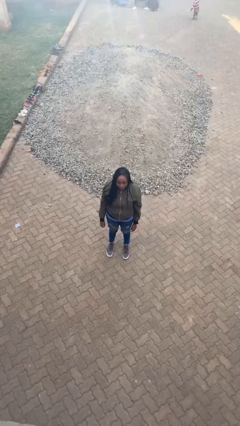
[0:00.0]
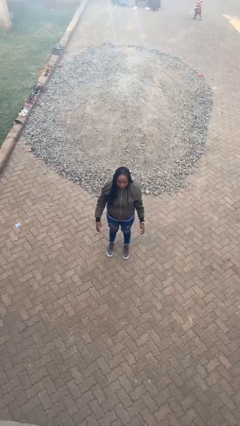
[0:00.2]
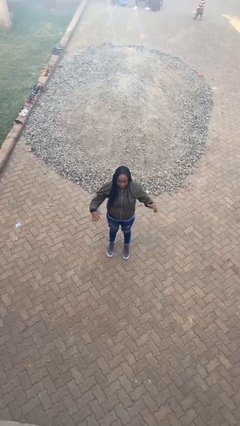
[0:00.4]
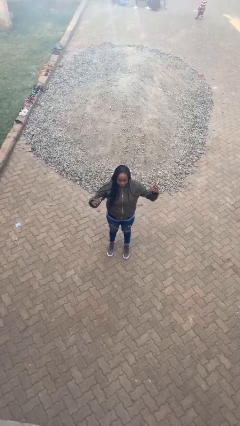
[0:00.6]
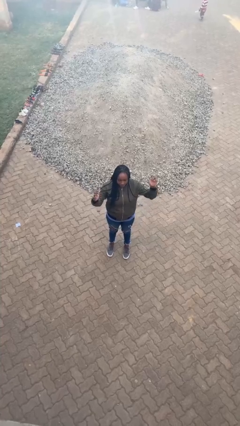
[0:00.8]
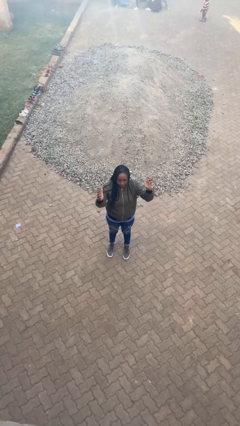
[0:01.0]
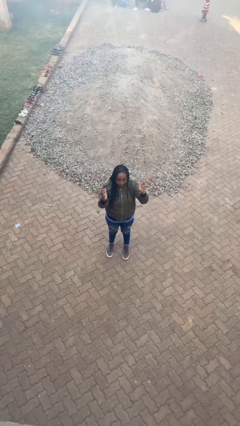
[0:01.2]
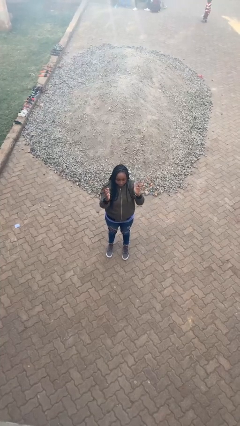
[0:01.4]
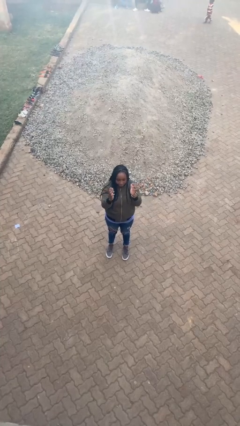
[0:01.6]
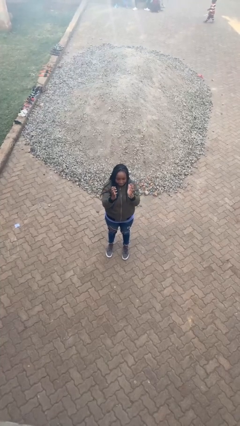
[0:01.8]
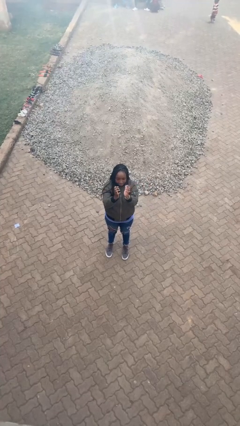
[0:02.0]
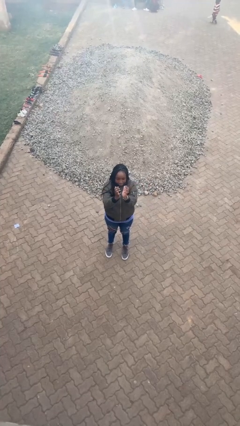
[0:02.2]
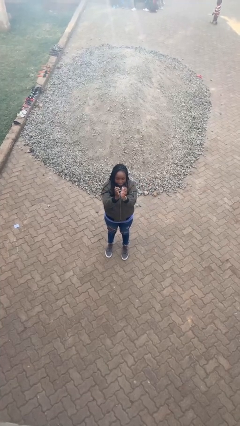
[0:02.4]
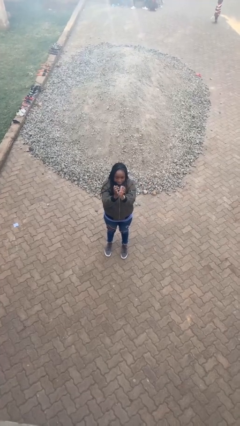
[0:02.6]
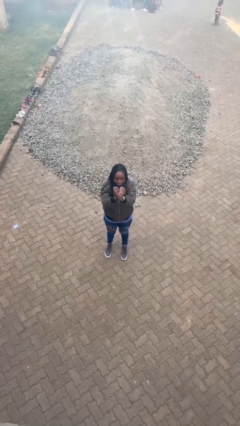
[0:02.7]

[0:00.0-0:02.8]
person gestures zoom in

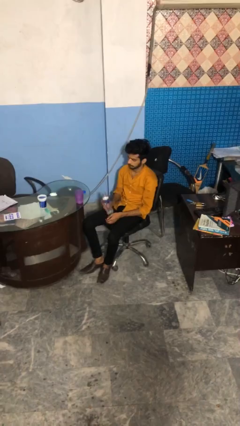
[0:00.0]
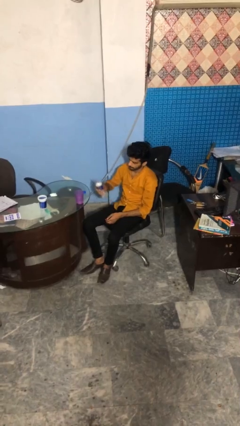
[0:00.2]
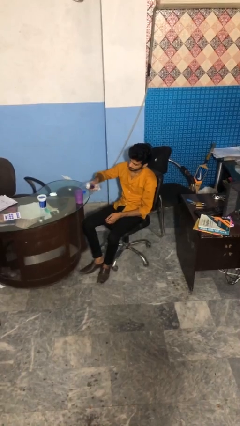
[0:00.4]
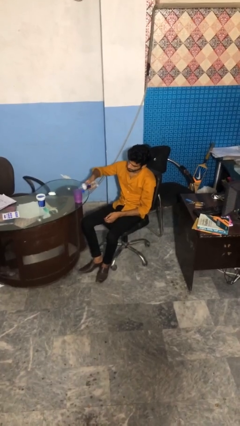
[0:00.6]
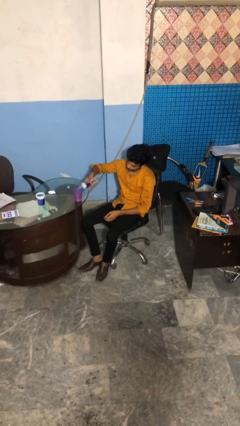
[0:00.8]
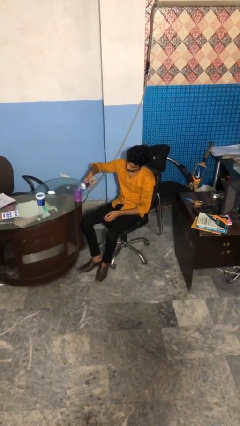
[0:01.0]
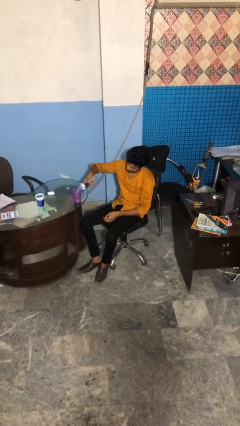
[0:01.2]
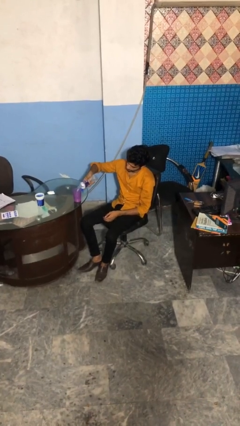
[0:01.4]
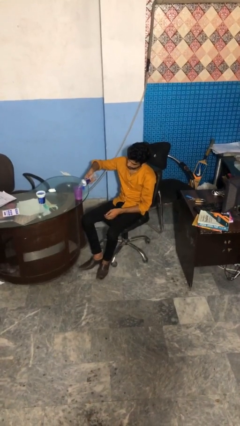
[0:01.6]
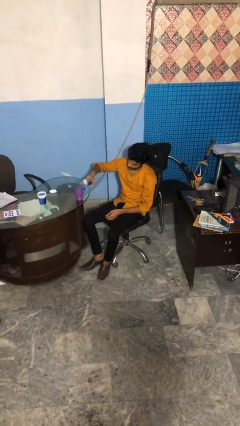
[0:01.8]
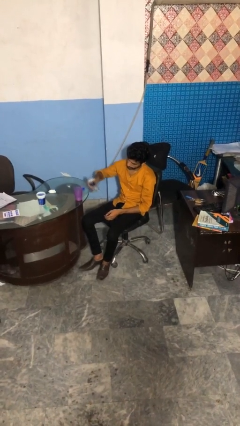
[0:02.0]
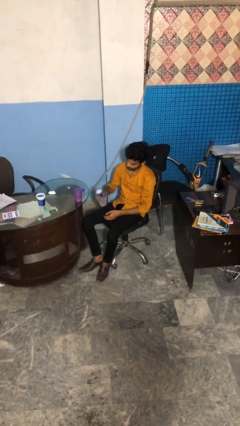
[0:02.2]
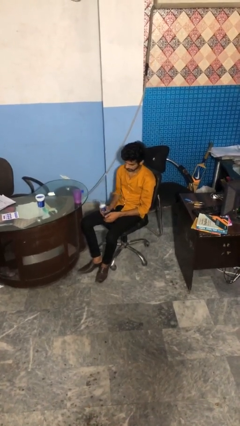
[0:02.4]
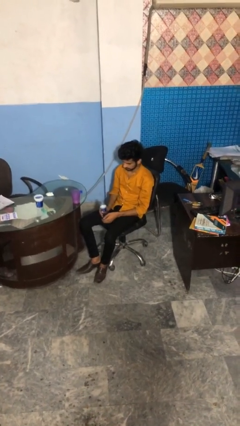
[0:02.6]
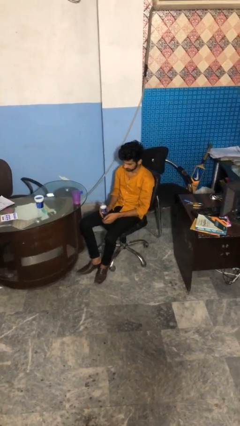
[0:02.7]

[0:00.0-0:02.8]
person pours liquid into cup

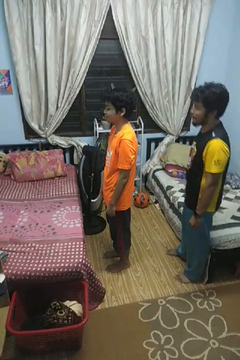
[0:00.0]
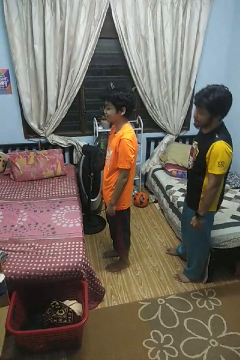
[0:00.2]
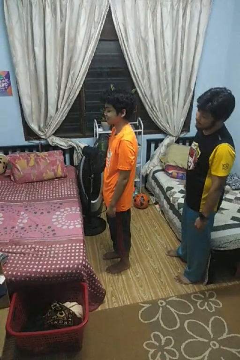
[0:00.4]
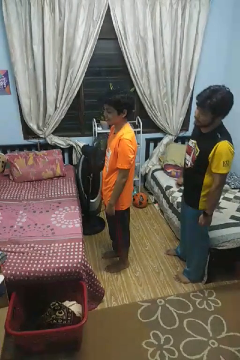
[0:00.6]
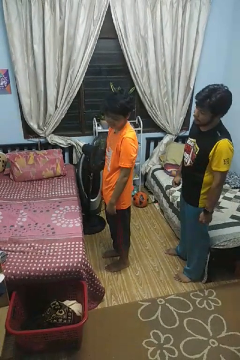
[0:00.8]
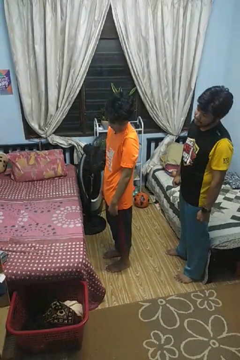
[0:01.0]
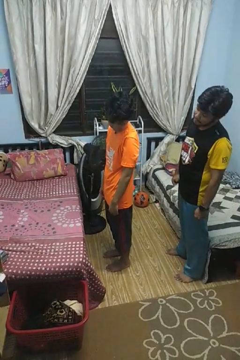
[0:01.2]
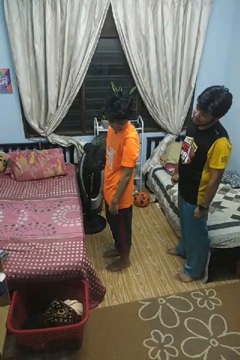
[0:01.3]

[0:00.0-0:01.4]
person looks over shoulder

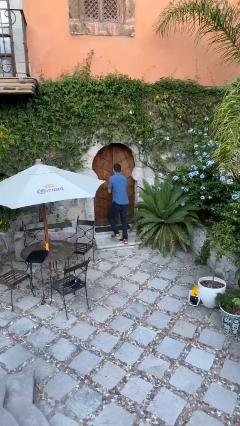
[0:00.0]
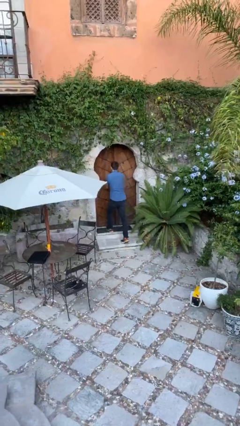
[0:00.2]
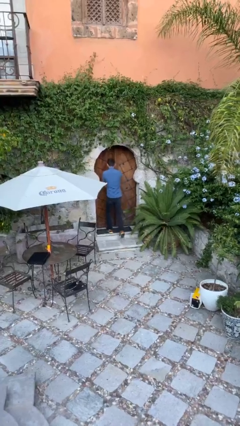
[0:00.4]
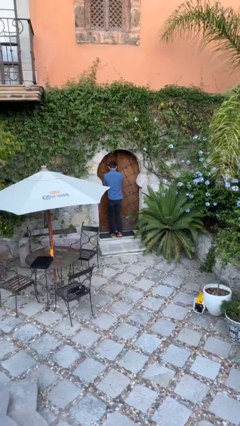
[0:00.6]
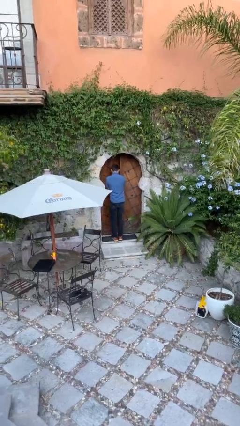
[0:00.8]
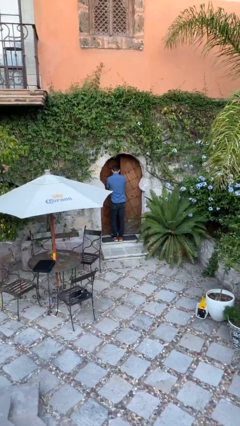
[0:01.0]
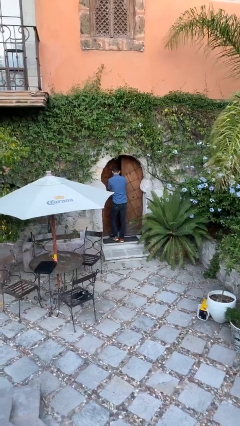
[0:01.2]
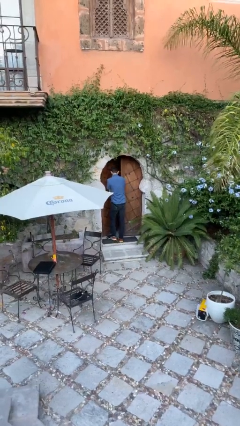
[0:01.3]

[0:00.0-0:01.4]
person opens facility door

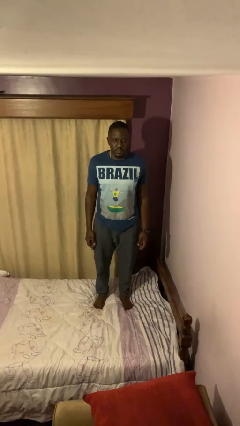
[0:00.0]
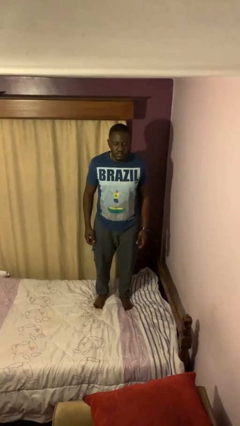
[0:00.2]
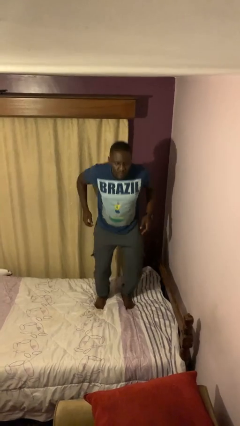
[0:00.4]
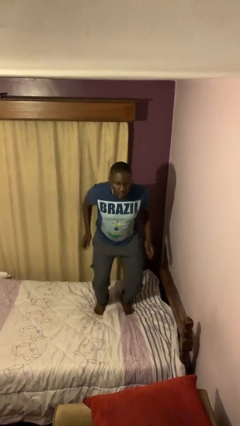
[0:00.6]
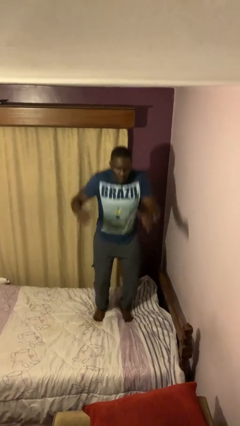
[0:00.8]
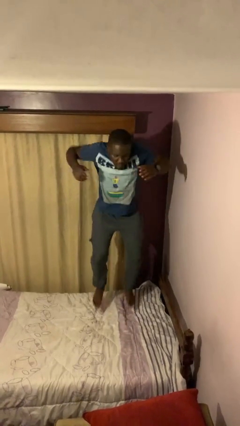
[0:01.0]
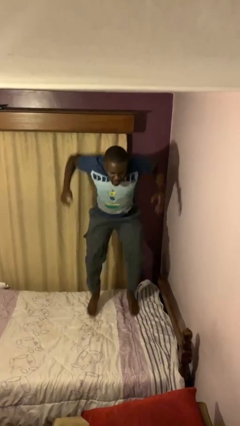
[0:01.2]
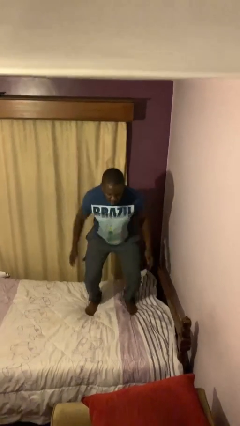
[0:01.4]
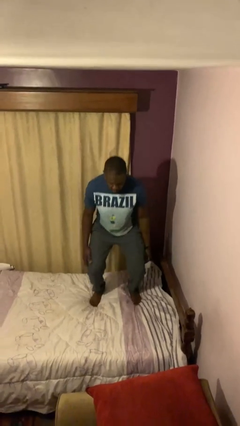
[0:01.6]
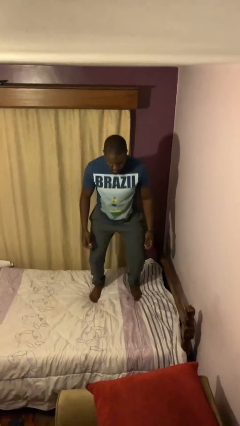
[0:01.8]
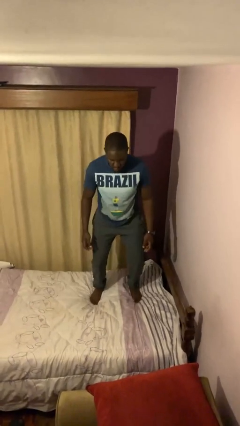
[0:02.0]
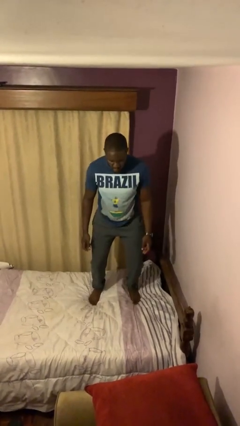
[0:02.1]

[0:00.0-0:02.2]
person jumps on bed

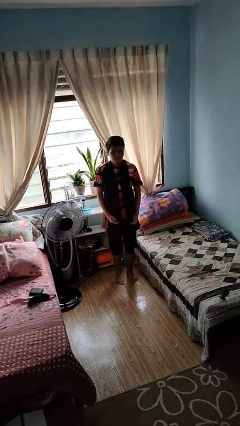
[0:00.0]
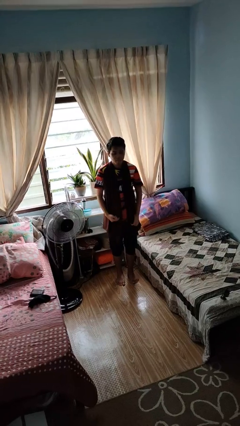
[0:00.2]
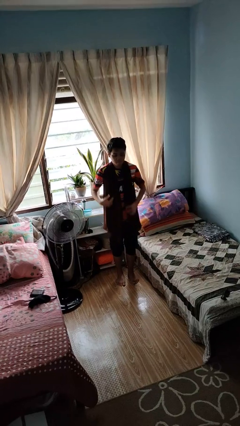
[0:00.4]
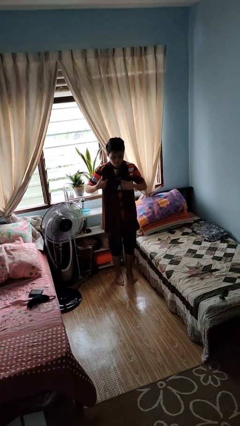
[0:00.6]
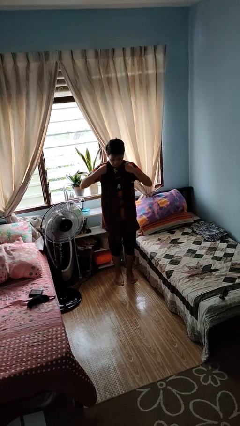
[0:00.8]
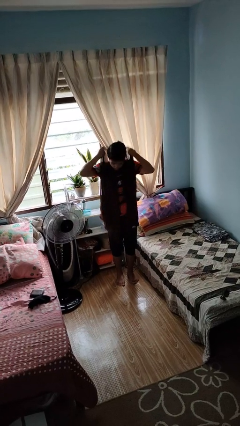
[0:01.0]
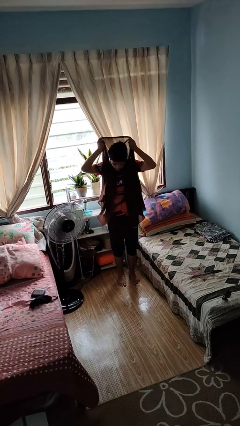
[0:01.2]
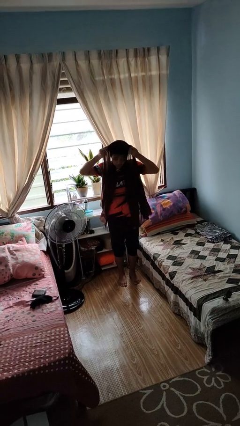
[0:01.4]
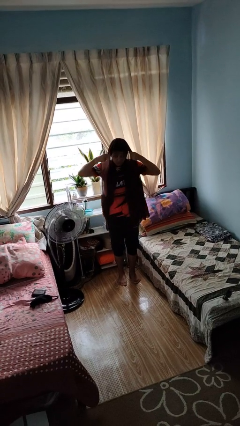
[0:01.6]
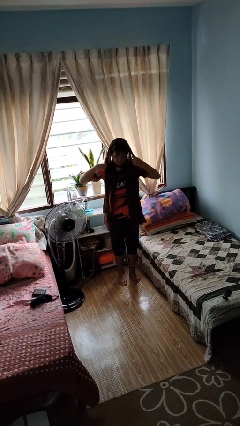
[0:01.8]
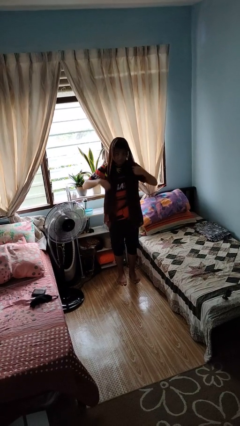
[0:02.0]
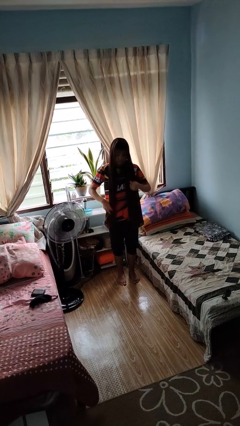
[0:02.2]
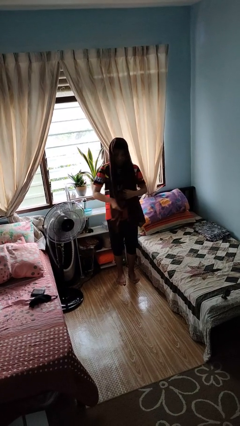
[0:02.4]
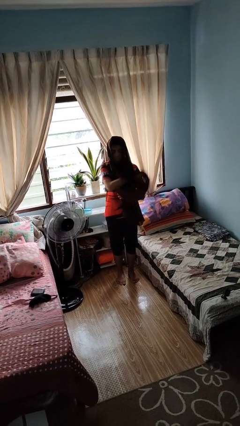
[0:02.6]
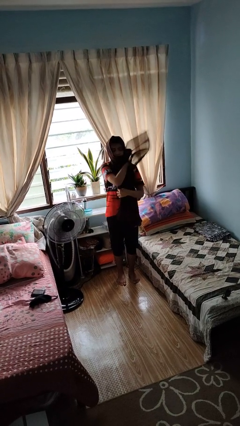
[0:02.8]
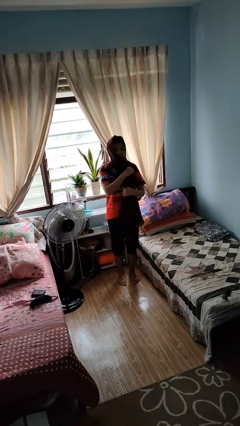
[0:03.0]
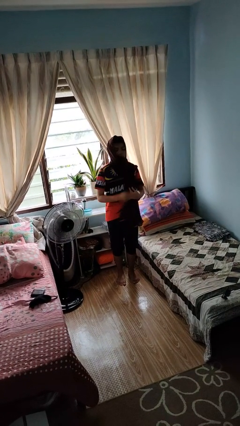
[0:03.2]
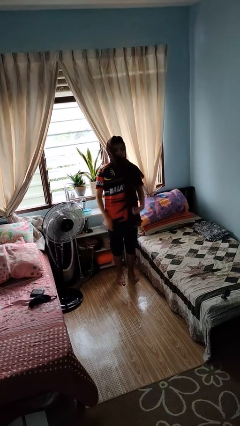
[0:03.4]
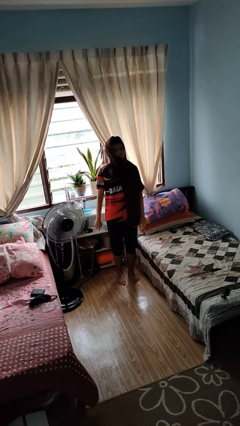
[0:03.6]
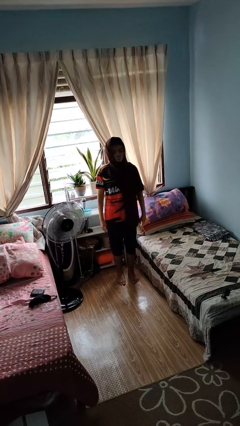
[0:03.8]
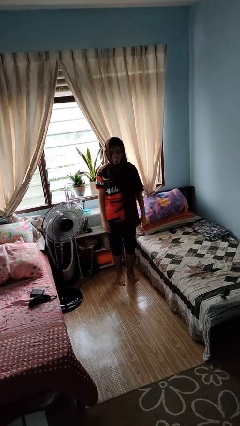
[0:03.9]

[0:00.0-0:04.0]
person puts on scarf

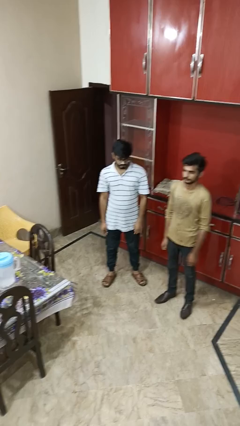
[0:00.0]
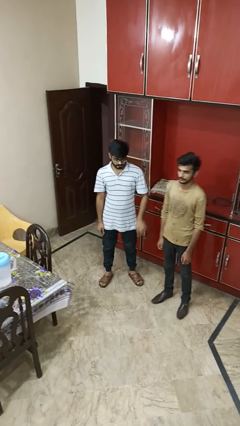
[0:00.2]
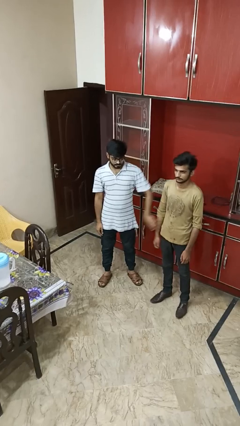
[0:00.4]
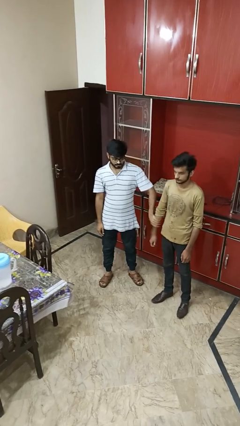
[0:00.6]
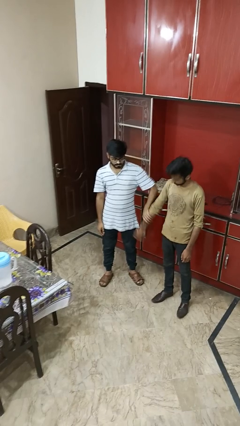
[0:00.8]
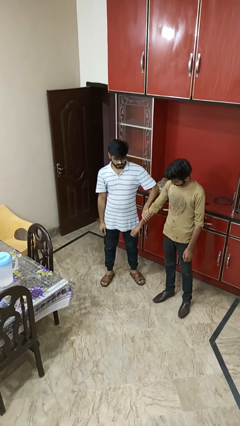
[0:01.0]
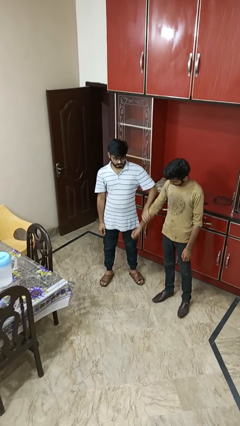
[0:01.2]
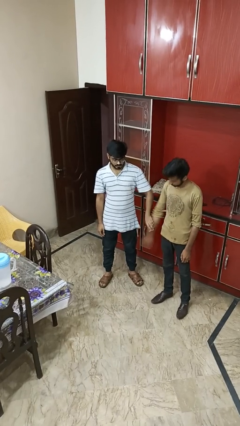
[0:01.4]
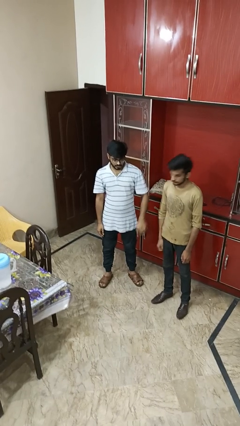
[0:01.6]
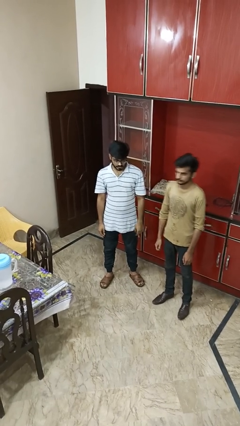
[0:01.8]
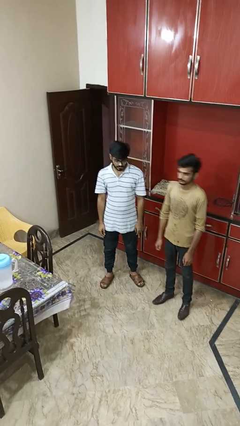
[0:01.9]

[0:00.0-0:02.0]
person grabs person by forearm

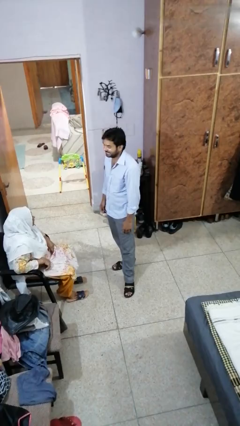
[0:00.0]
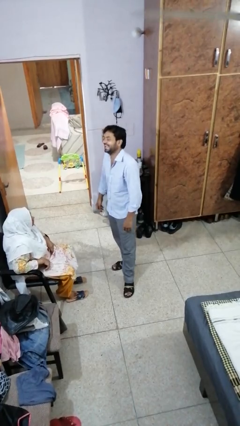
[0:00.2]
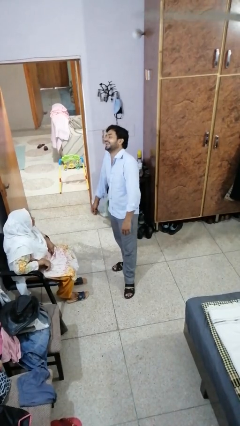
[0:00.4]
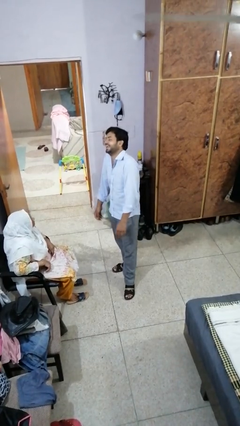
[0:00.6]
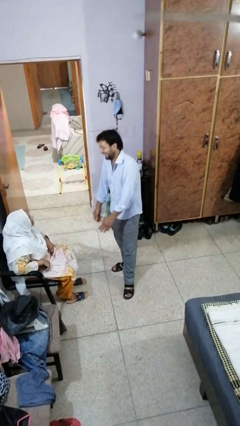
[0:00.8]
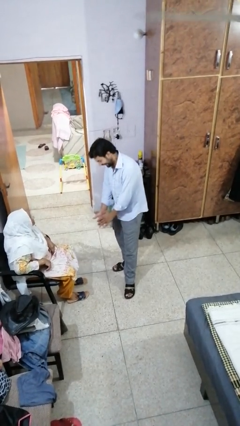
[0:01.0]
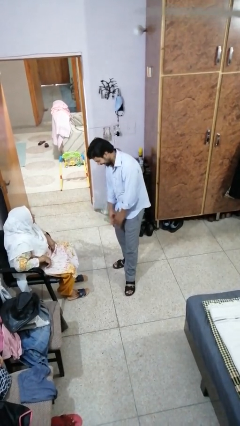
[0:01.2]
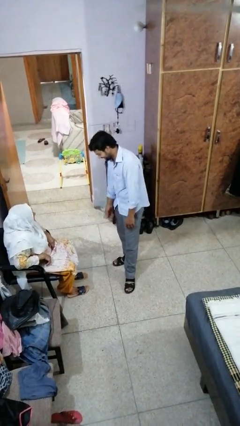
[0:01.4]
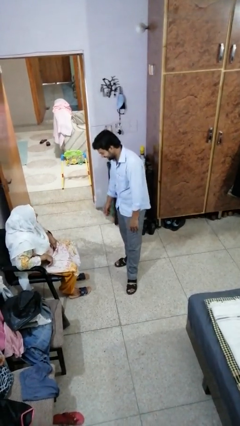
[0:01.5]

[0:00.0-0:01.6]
person laughs with person
